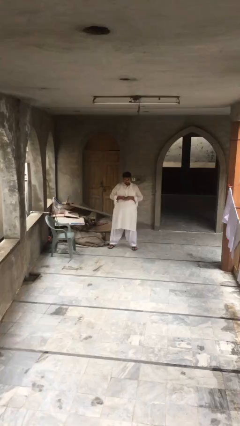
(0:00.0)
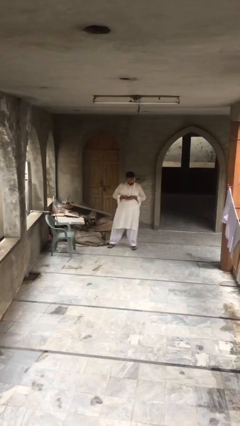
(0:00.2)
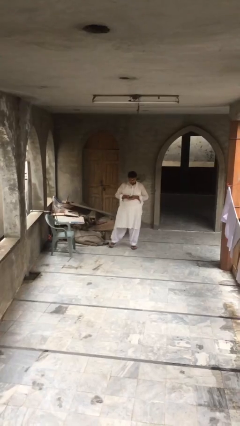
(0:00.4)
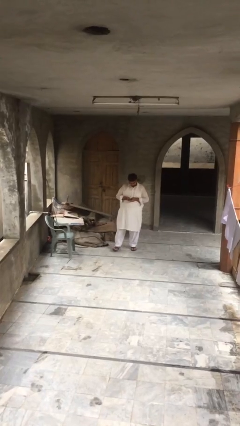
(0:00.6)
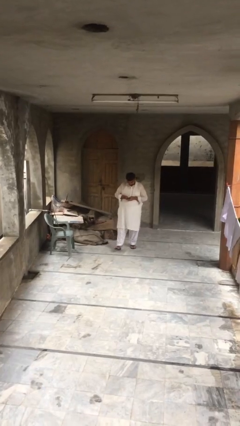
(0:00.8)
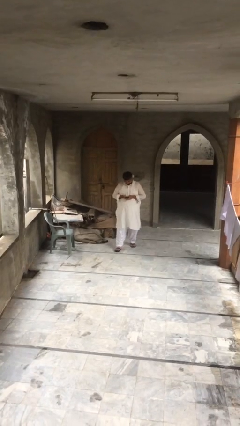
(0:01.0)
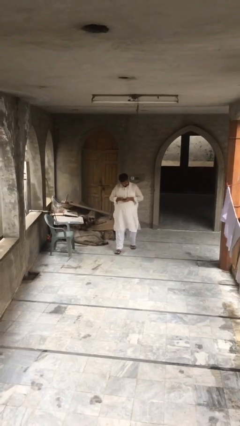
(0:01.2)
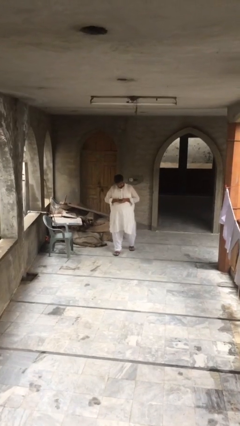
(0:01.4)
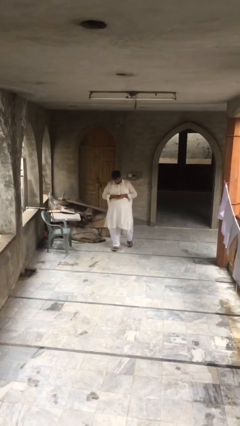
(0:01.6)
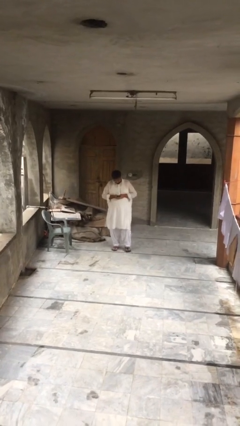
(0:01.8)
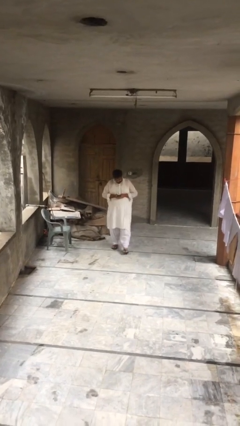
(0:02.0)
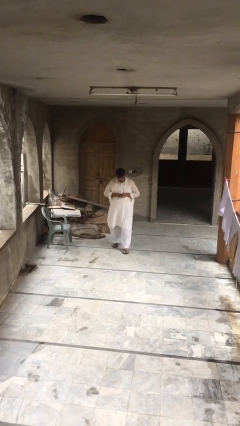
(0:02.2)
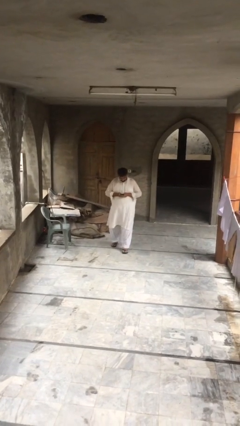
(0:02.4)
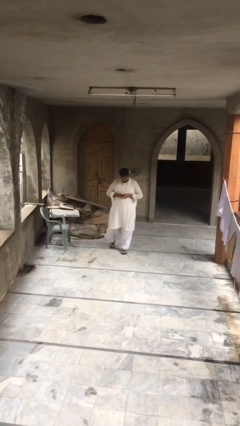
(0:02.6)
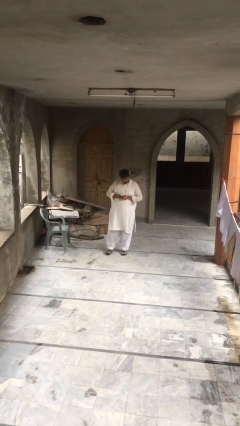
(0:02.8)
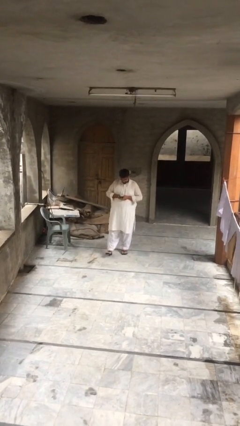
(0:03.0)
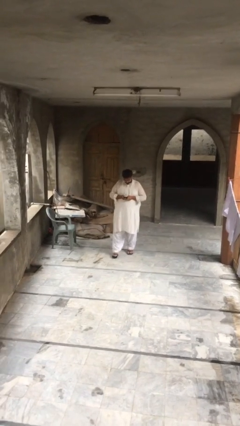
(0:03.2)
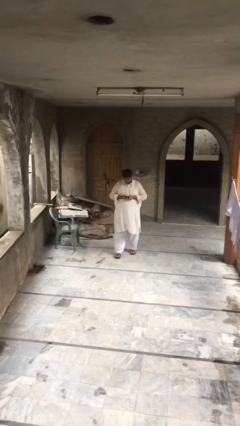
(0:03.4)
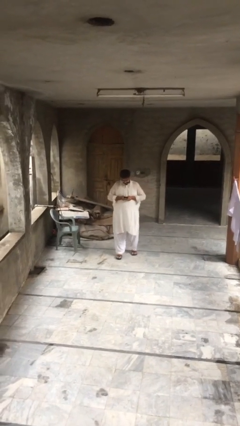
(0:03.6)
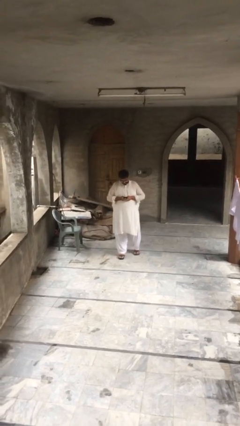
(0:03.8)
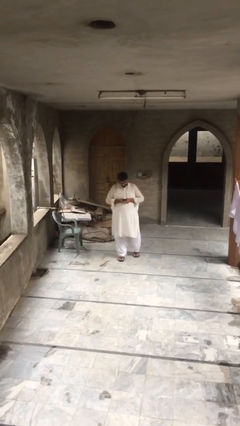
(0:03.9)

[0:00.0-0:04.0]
person texts on phone

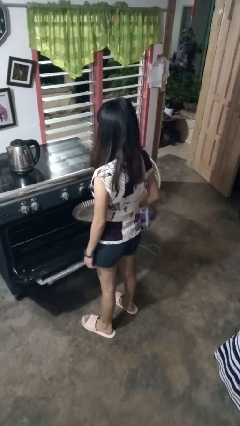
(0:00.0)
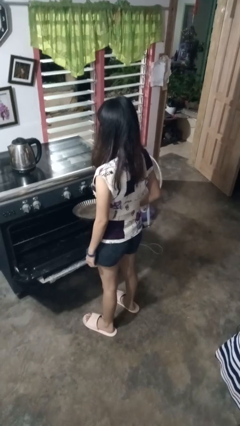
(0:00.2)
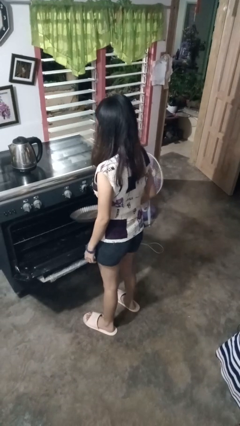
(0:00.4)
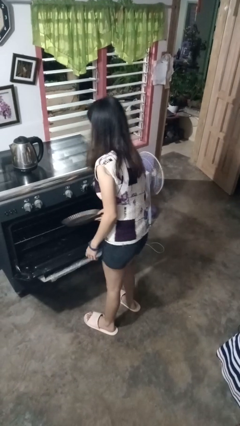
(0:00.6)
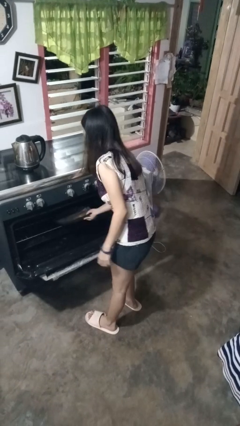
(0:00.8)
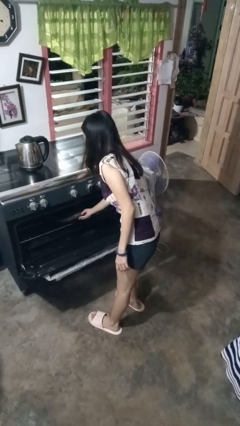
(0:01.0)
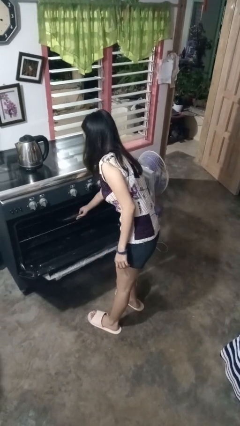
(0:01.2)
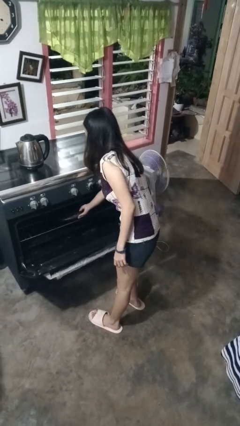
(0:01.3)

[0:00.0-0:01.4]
person puts object into oven

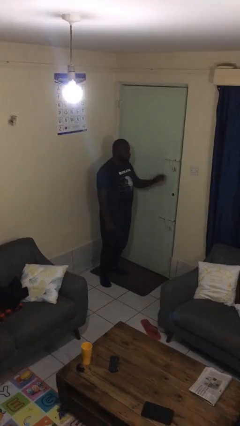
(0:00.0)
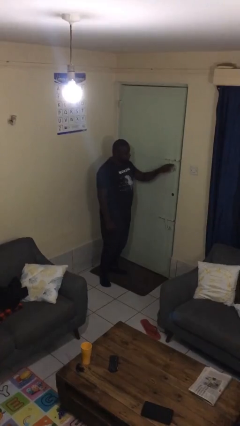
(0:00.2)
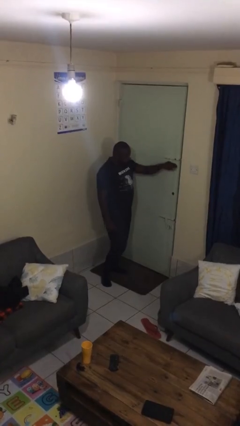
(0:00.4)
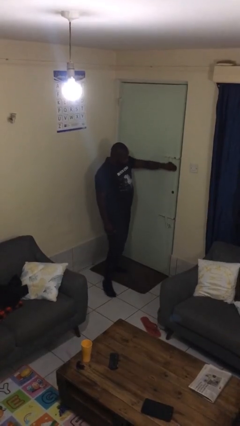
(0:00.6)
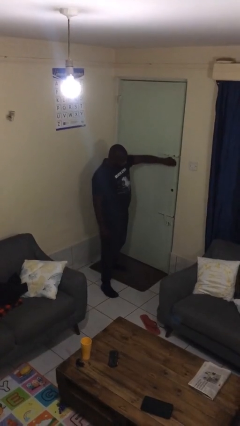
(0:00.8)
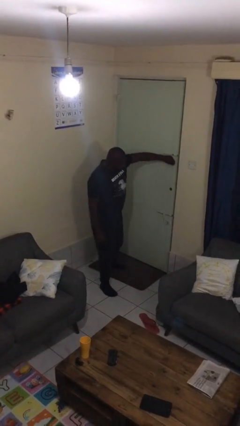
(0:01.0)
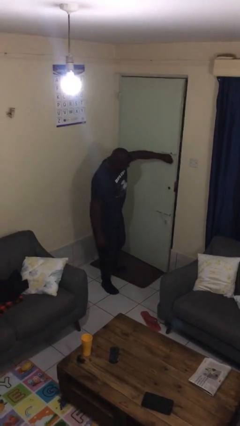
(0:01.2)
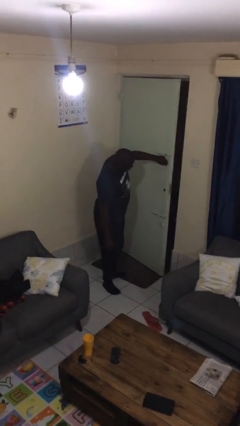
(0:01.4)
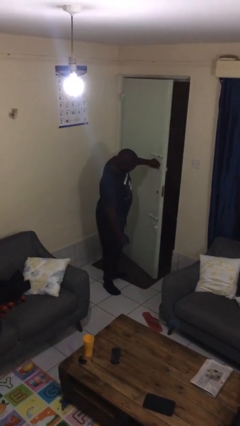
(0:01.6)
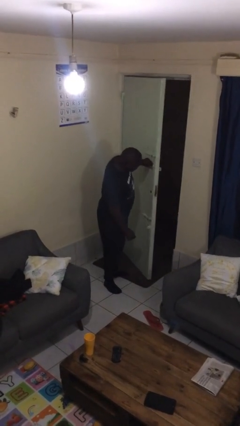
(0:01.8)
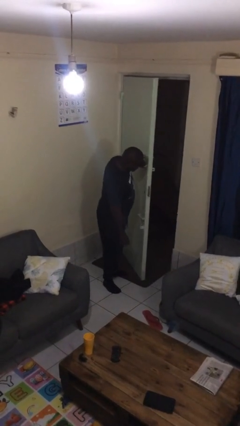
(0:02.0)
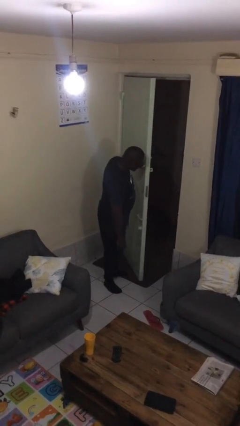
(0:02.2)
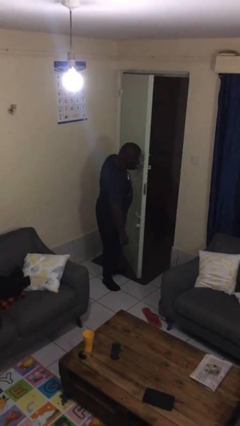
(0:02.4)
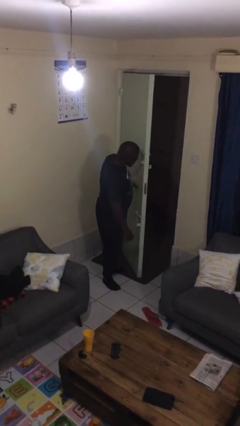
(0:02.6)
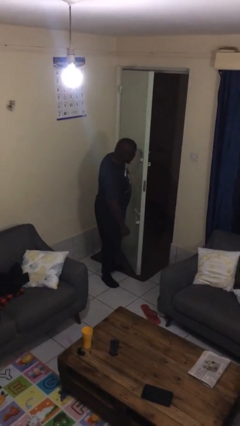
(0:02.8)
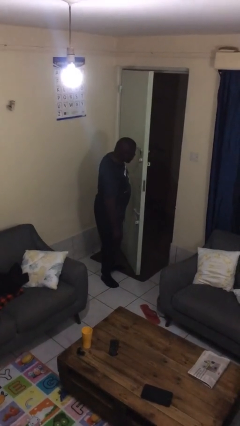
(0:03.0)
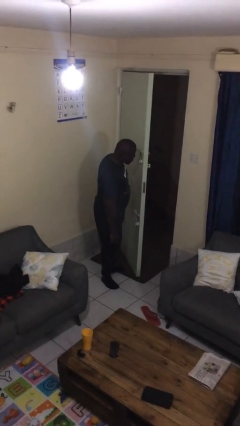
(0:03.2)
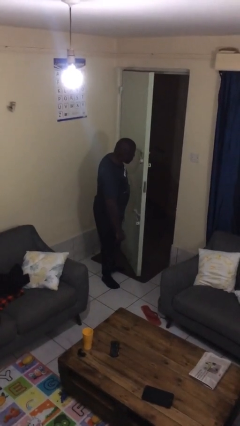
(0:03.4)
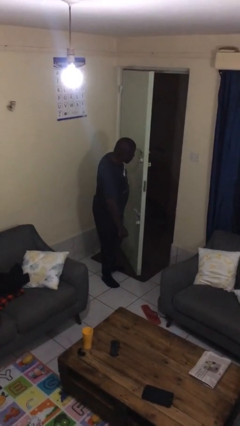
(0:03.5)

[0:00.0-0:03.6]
person opens facility door

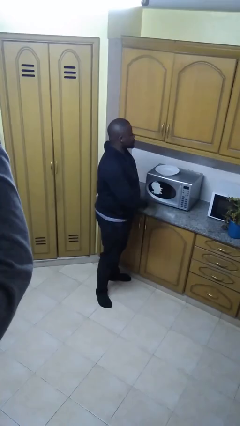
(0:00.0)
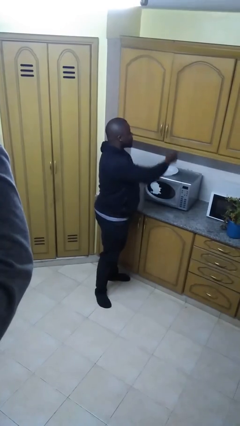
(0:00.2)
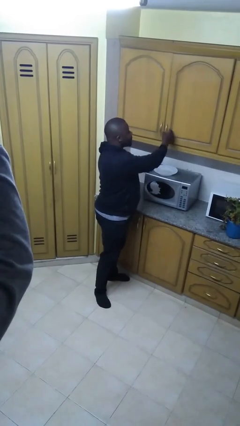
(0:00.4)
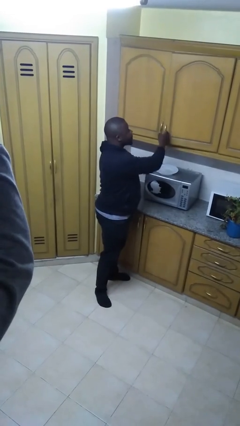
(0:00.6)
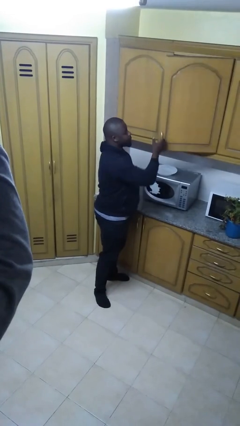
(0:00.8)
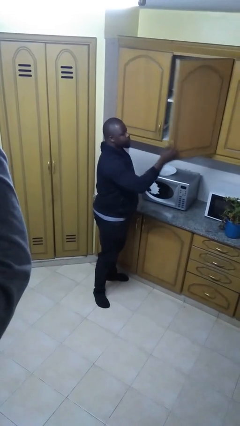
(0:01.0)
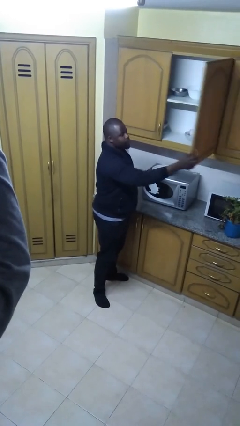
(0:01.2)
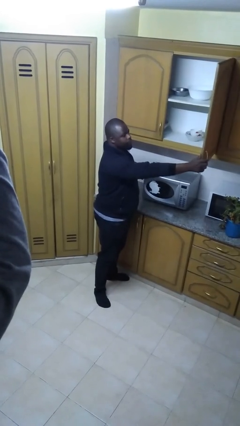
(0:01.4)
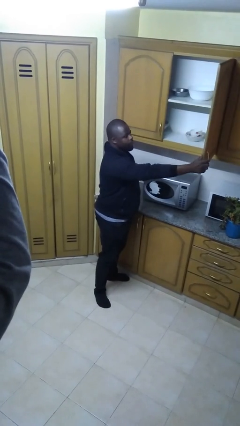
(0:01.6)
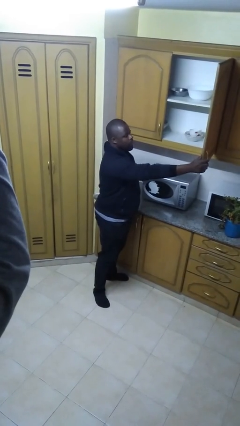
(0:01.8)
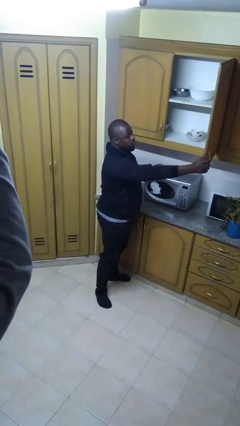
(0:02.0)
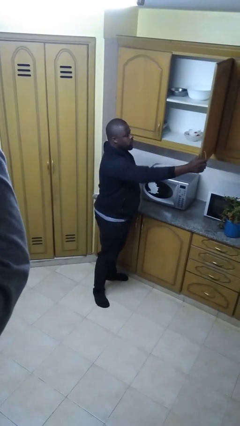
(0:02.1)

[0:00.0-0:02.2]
person opens cabinet

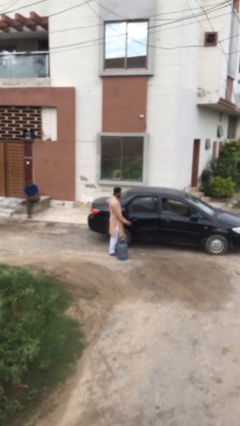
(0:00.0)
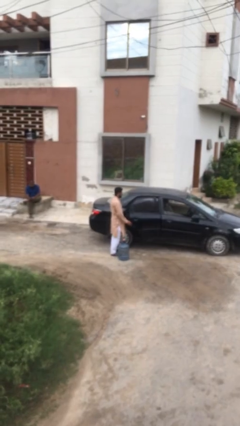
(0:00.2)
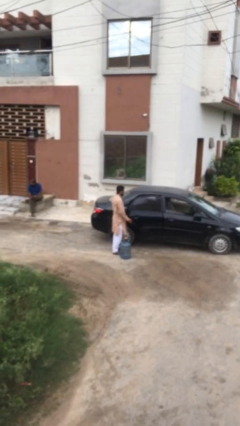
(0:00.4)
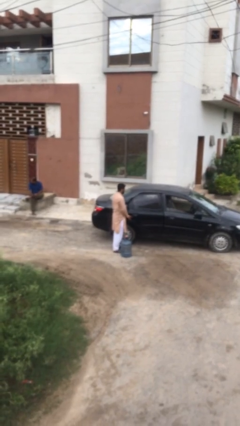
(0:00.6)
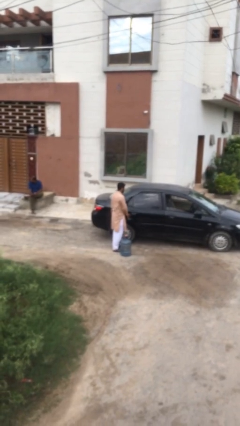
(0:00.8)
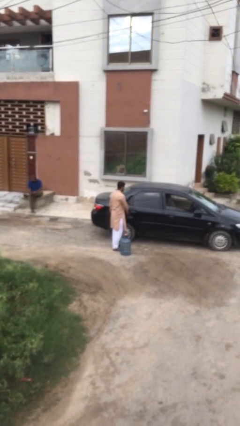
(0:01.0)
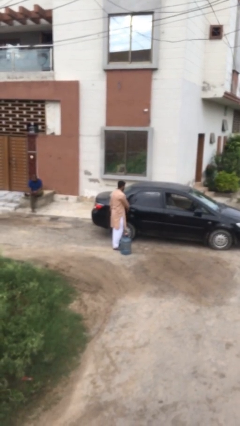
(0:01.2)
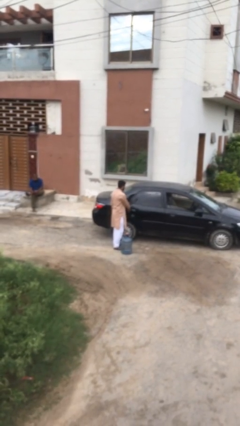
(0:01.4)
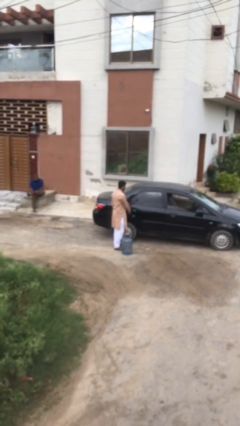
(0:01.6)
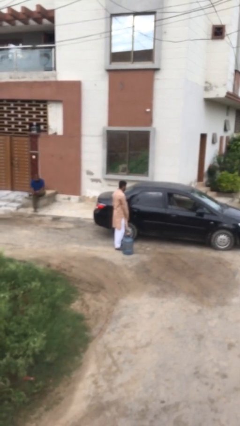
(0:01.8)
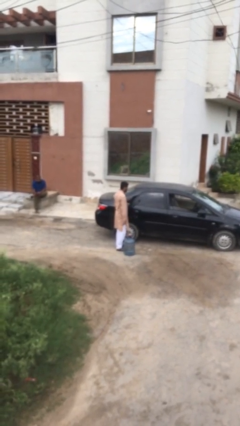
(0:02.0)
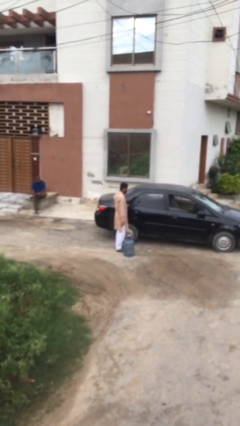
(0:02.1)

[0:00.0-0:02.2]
person closes car door

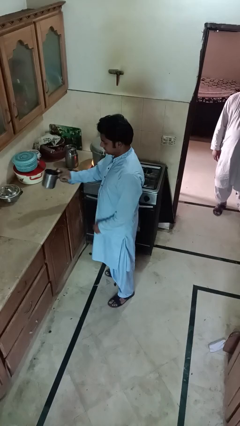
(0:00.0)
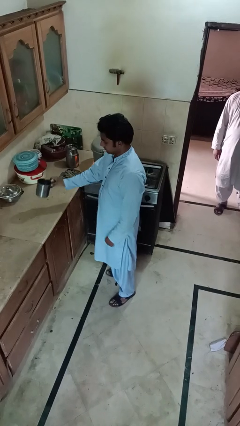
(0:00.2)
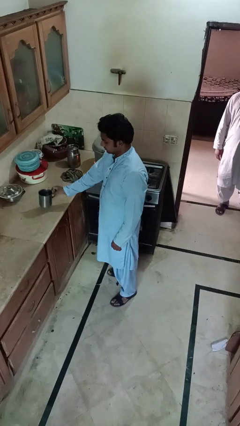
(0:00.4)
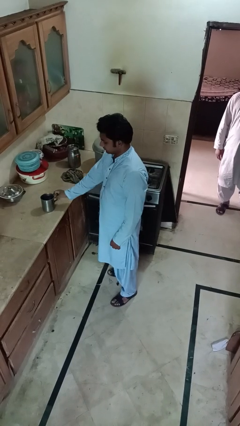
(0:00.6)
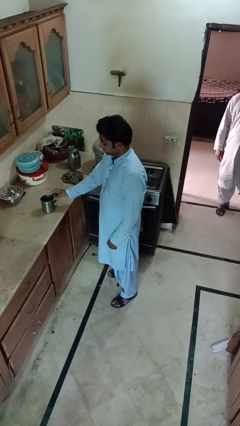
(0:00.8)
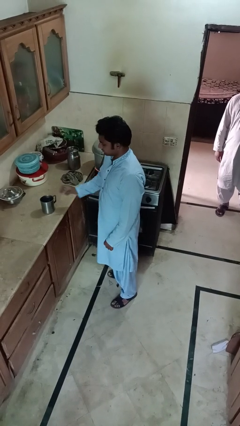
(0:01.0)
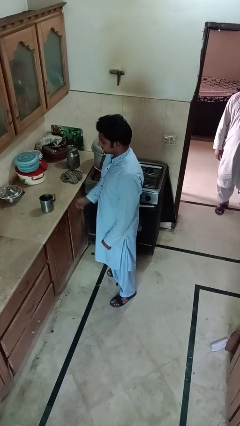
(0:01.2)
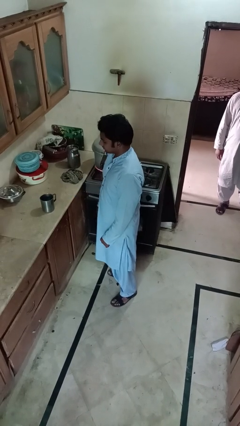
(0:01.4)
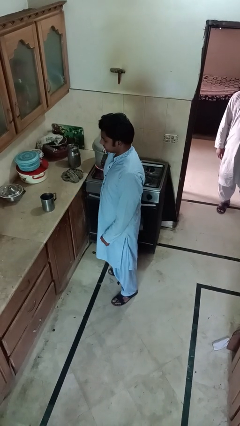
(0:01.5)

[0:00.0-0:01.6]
person puts down object on countertop

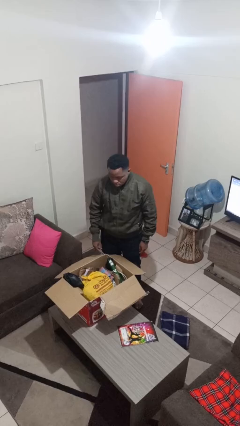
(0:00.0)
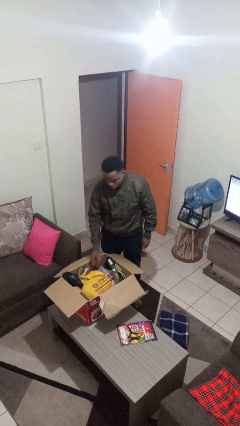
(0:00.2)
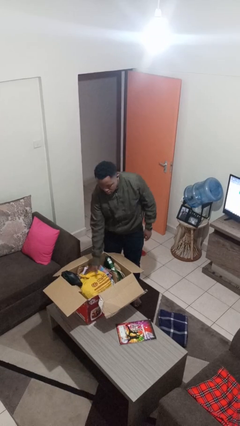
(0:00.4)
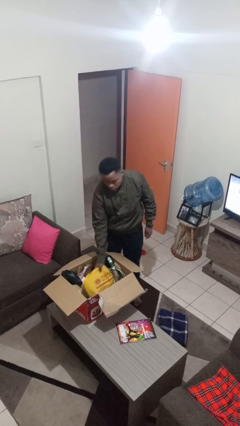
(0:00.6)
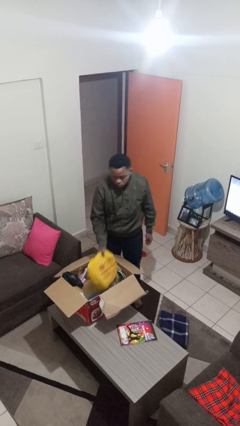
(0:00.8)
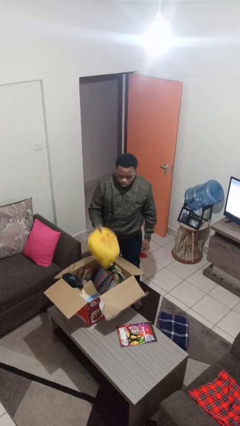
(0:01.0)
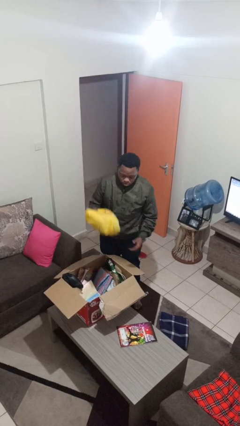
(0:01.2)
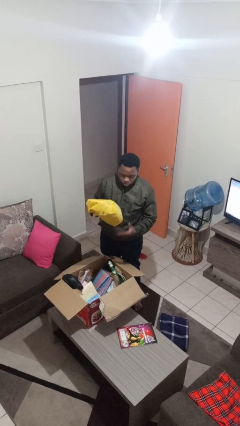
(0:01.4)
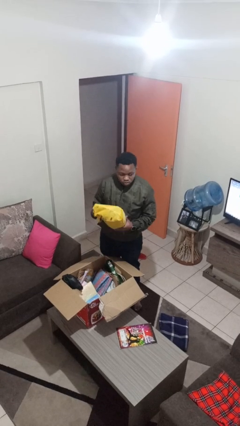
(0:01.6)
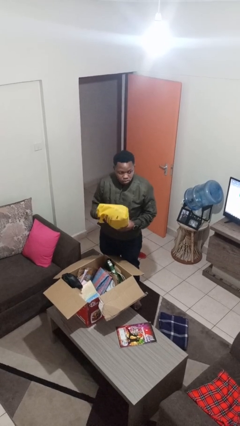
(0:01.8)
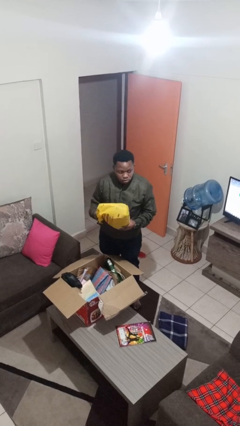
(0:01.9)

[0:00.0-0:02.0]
person takes object from box
